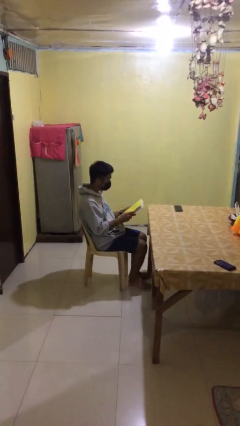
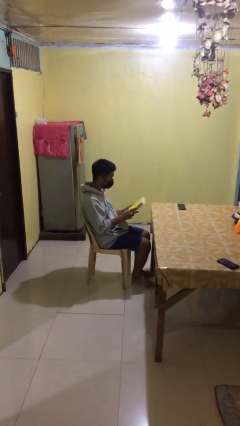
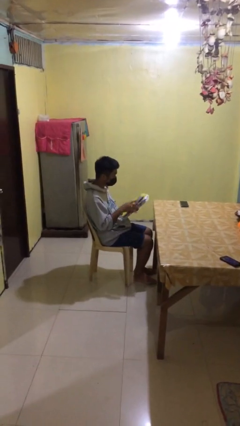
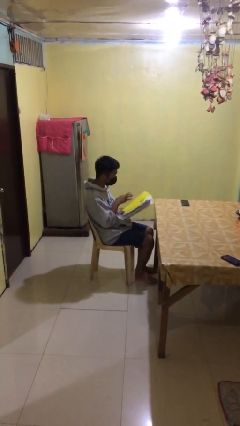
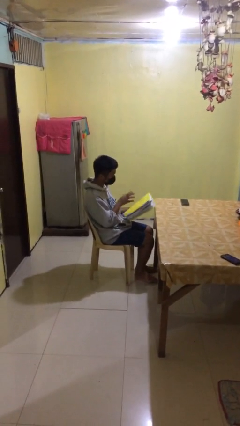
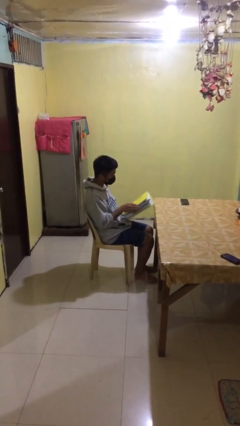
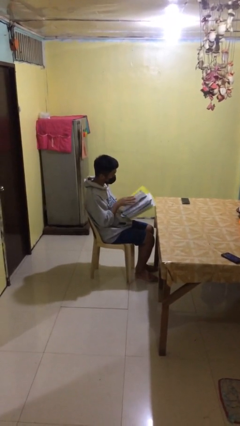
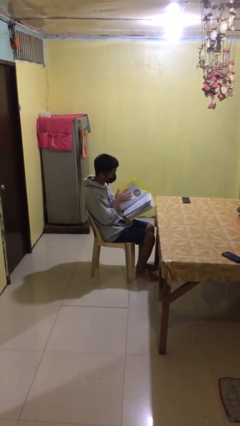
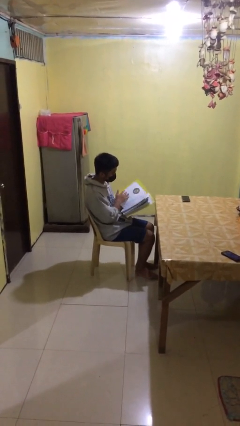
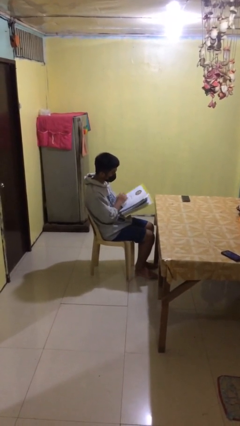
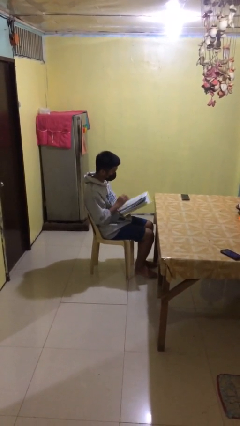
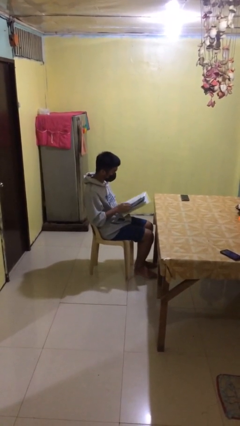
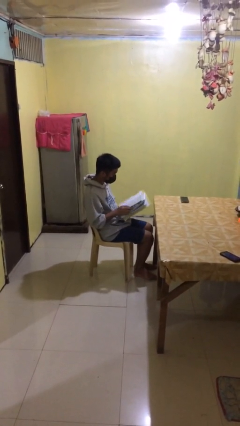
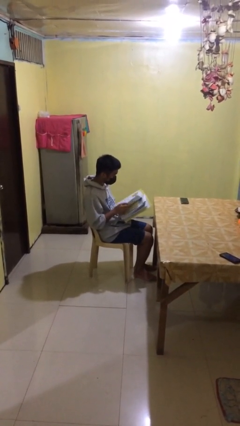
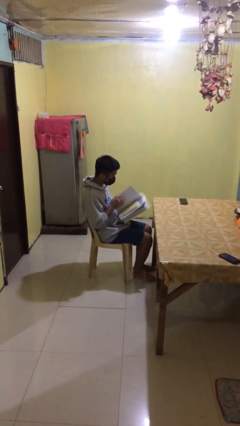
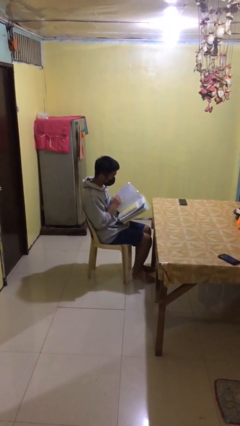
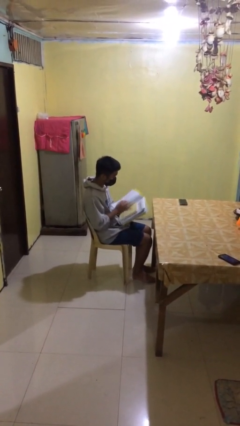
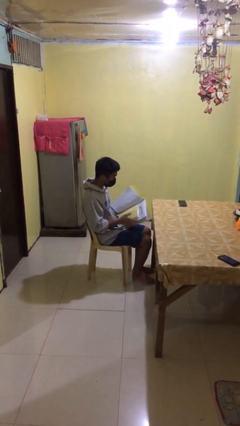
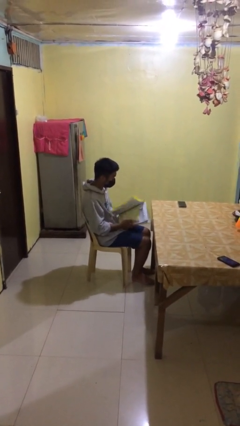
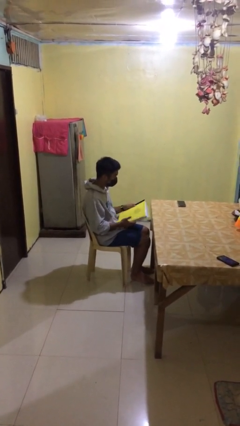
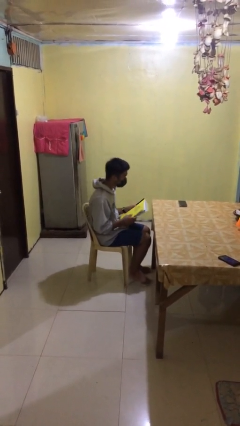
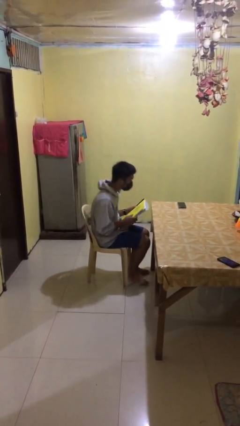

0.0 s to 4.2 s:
person reads document

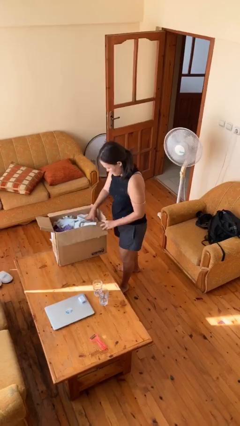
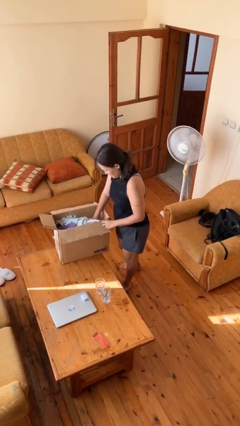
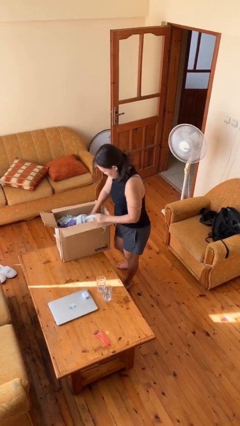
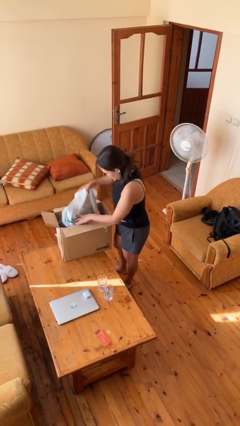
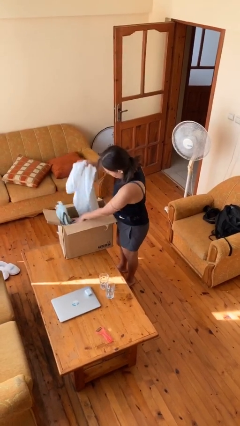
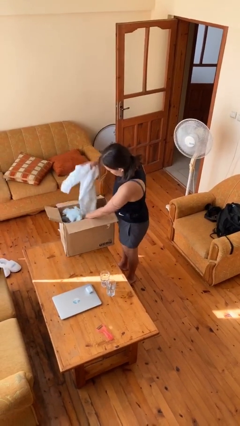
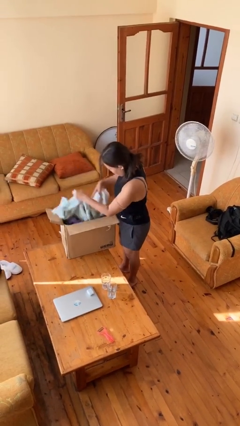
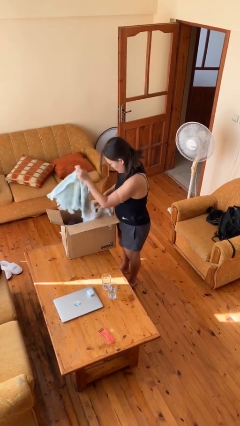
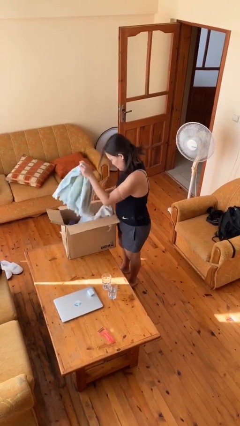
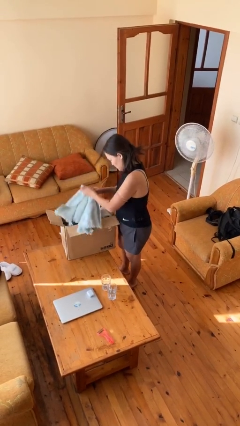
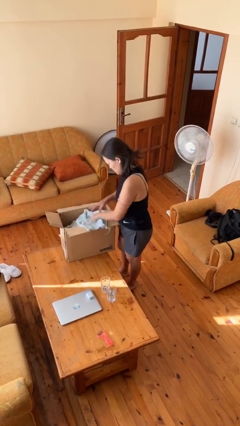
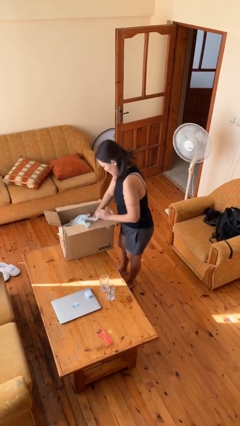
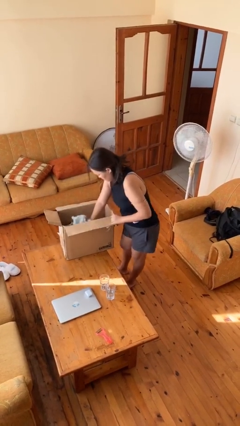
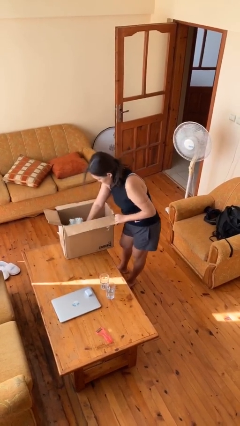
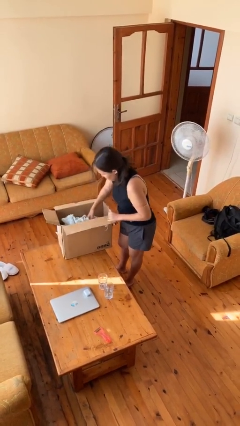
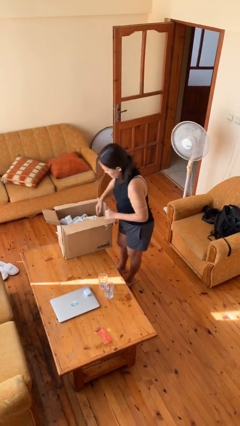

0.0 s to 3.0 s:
person searches in box

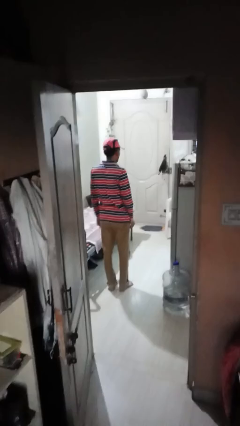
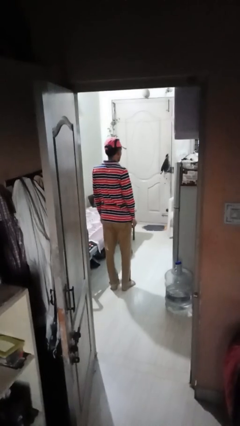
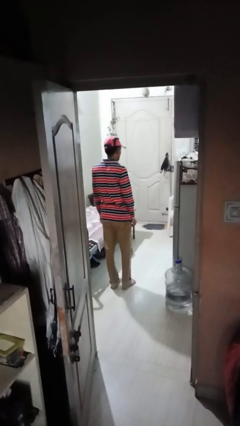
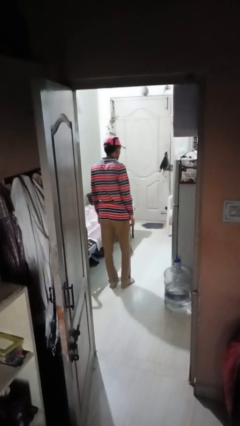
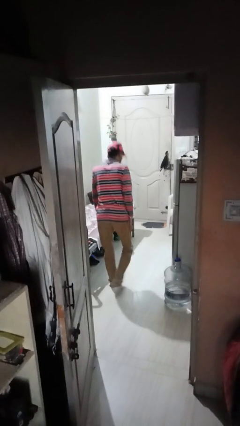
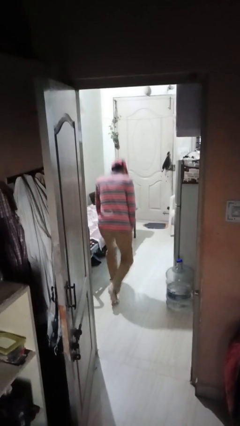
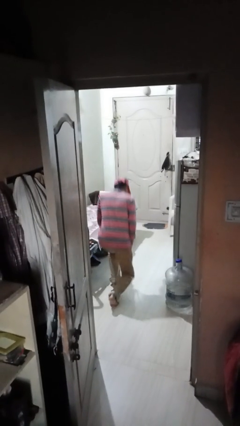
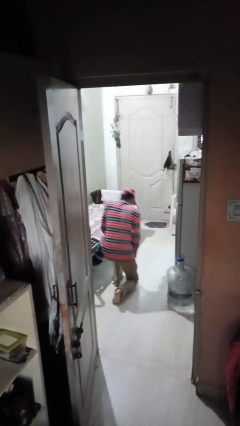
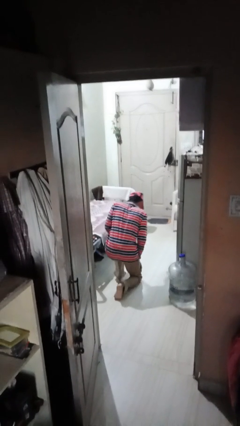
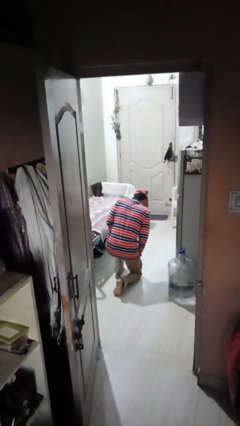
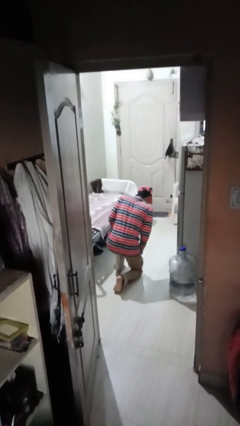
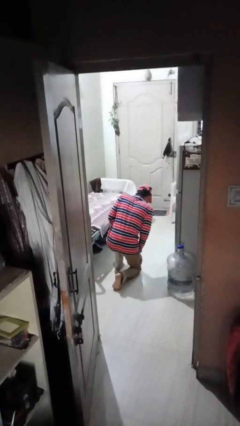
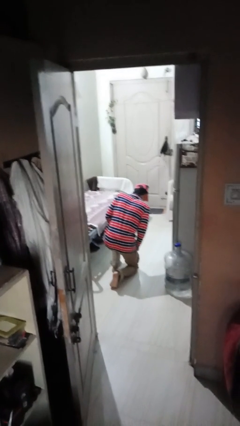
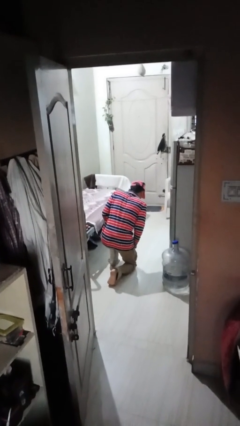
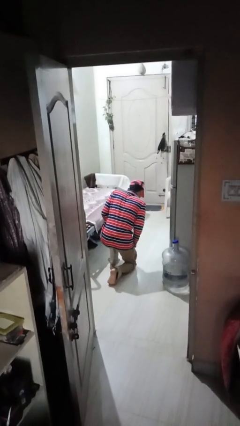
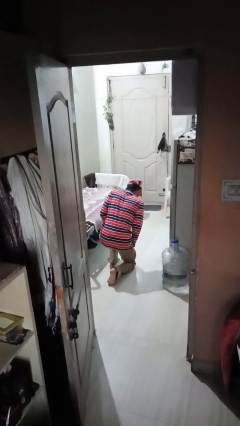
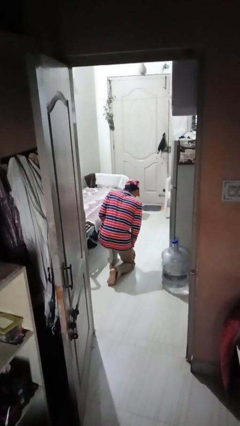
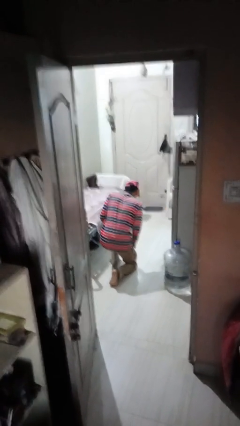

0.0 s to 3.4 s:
person kneels

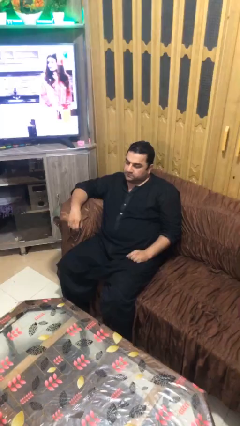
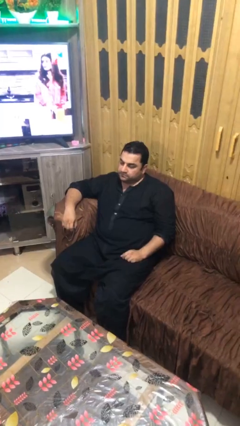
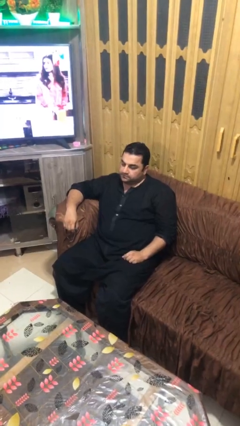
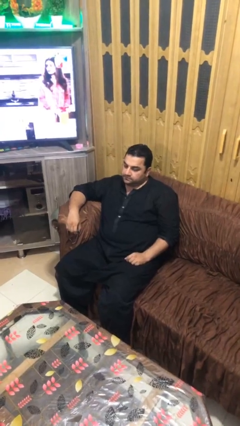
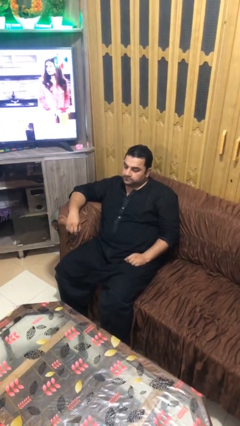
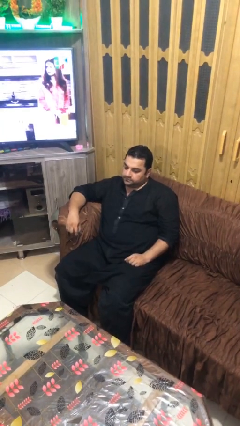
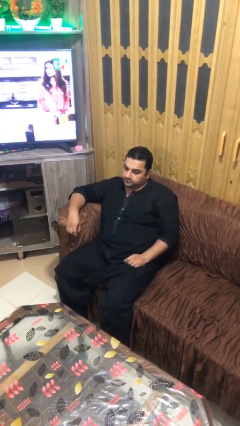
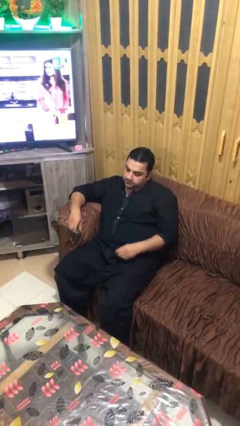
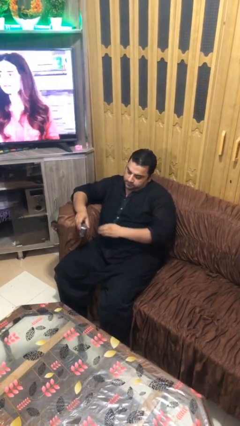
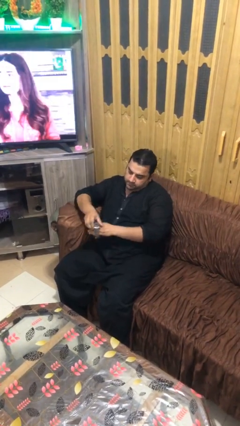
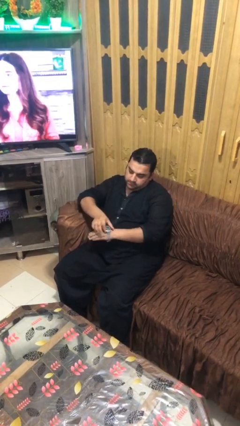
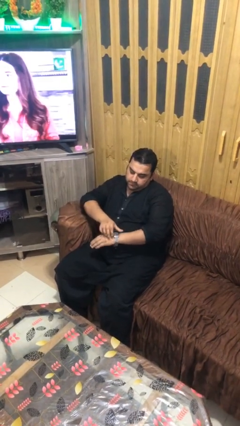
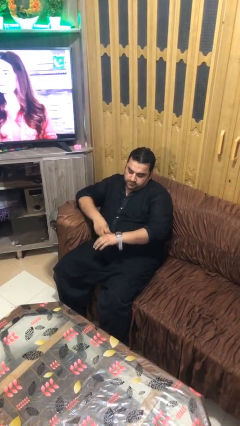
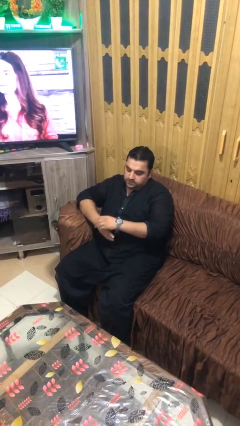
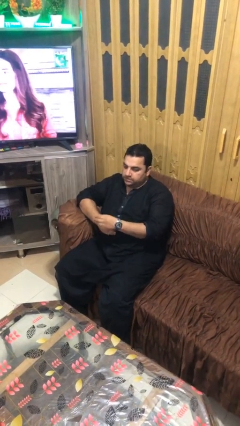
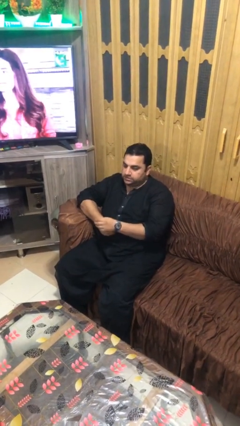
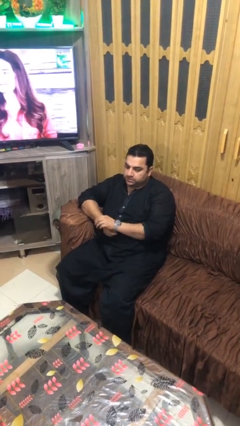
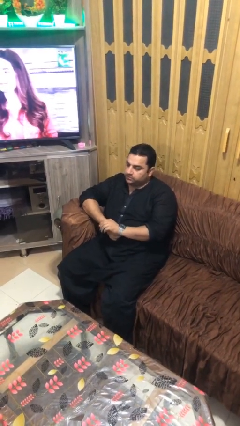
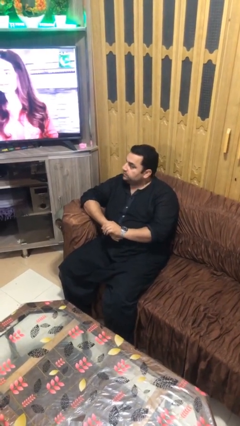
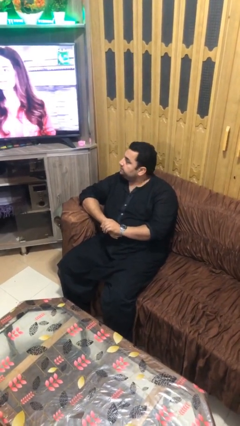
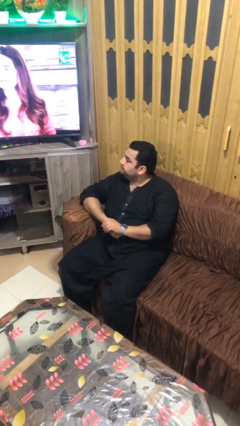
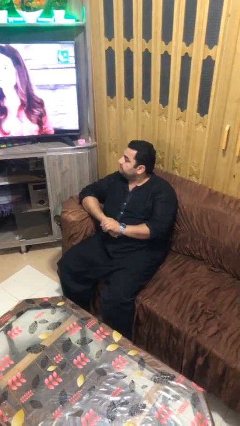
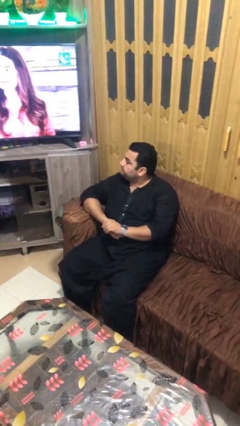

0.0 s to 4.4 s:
person puts on wristwatch

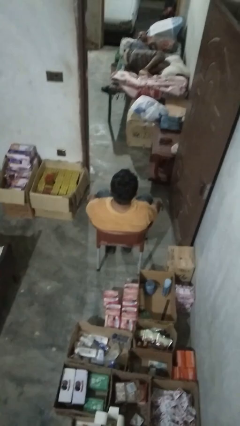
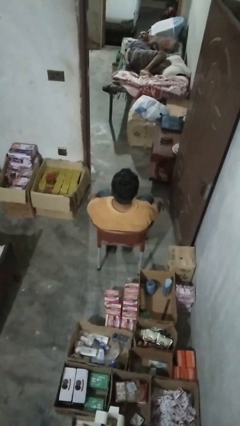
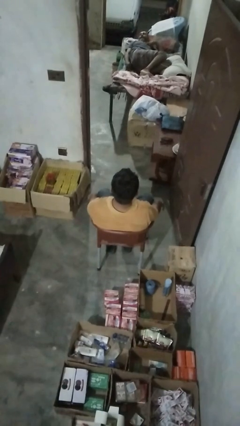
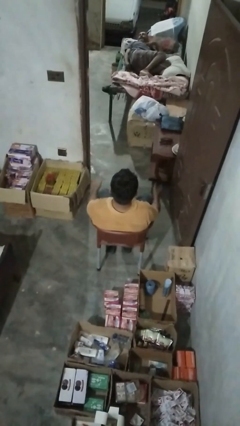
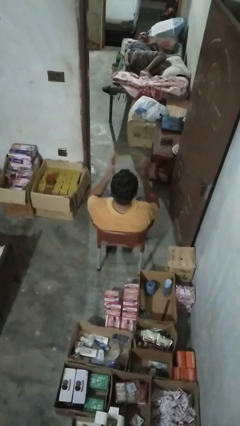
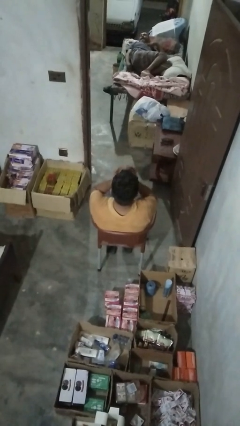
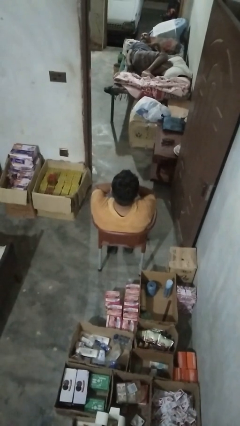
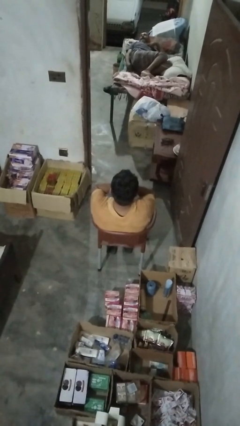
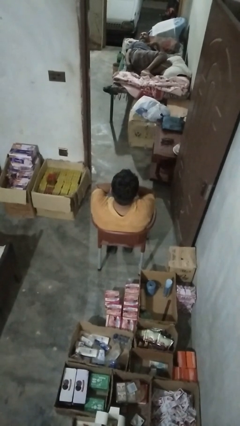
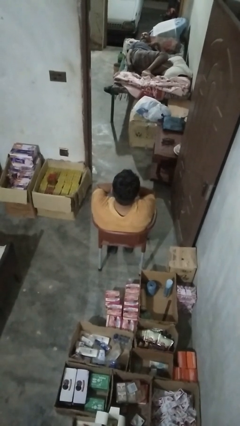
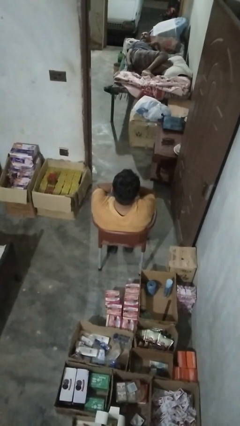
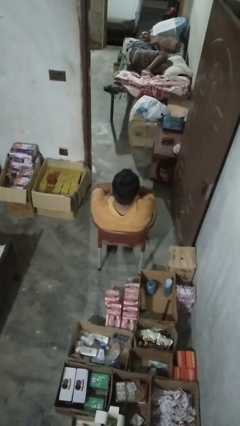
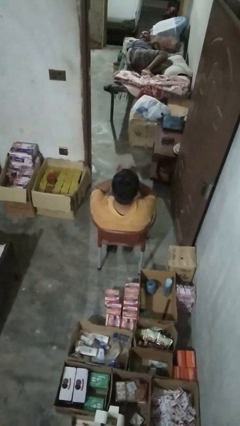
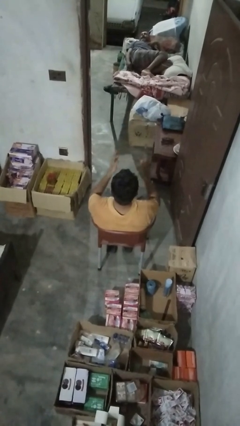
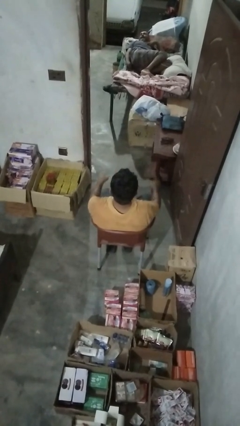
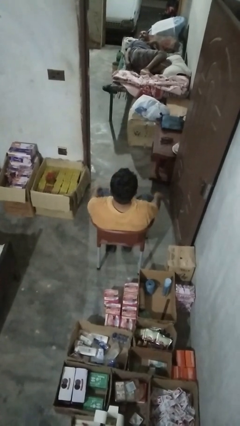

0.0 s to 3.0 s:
person covers face with hands
